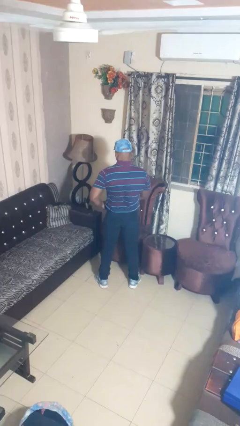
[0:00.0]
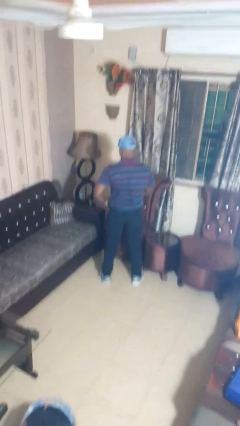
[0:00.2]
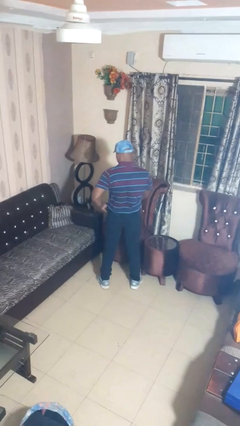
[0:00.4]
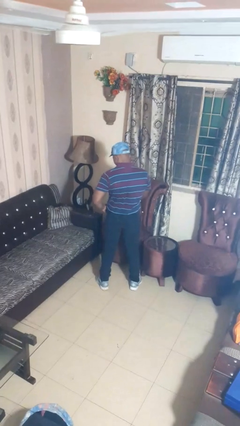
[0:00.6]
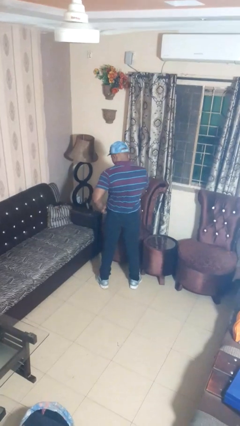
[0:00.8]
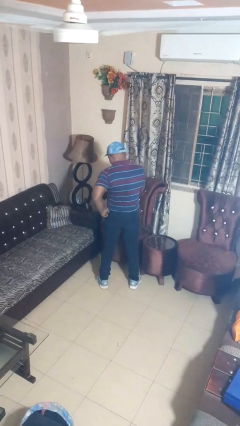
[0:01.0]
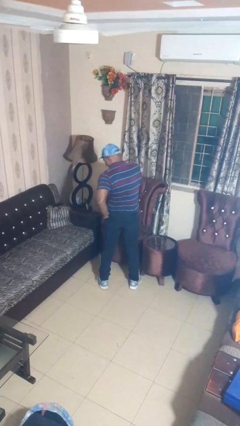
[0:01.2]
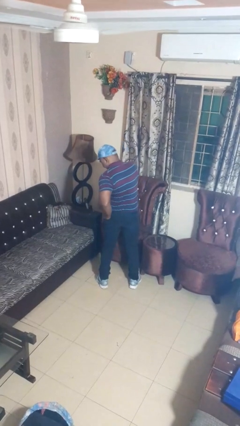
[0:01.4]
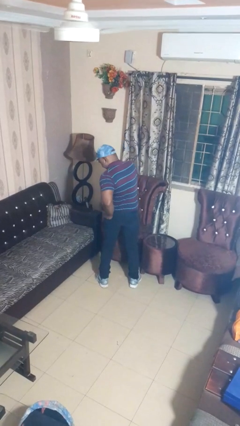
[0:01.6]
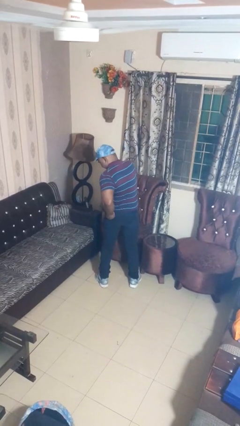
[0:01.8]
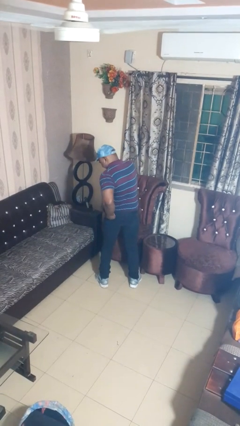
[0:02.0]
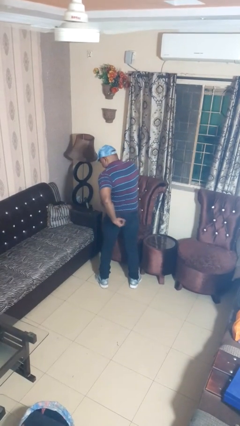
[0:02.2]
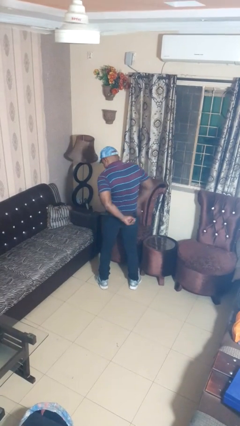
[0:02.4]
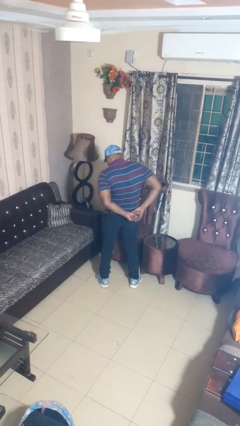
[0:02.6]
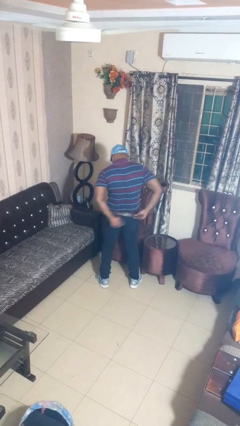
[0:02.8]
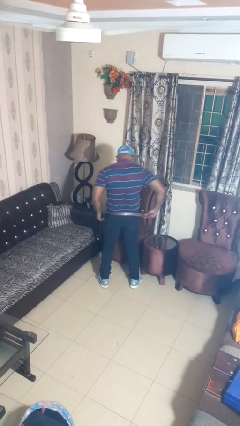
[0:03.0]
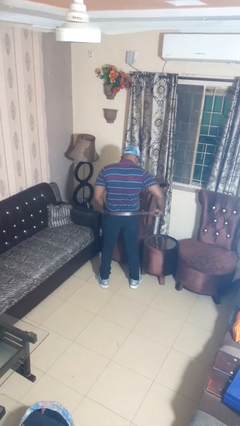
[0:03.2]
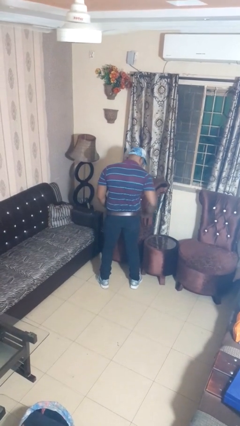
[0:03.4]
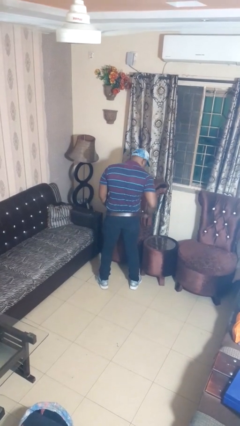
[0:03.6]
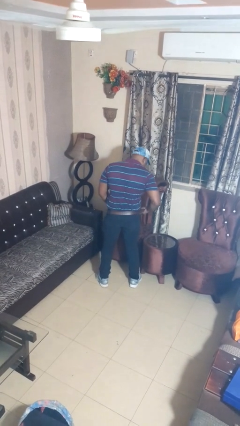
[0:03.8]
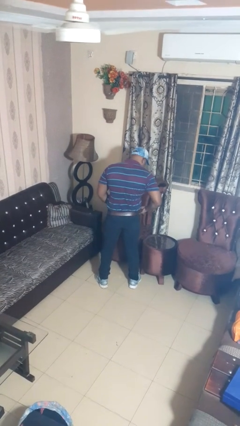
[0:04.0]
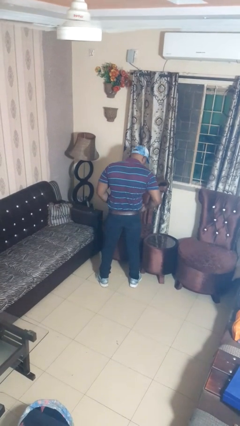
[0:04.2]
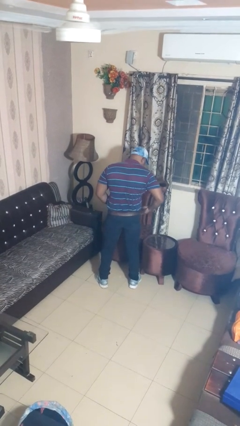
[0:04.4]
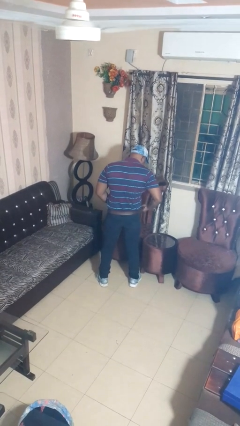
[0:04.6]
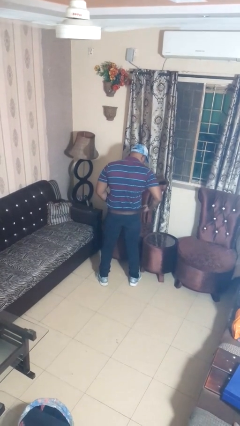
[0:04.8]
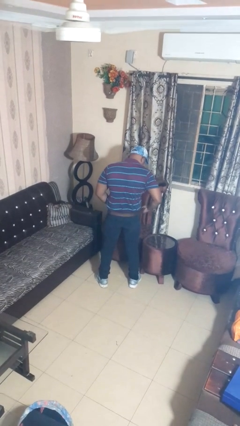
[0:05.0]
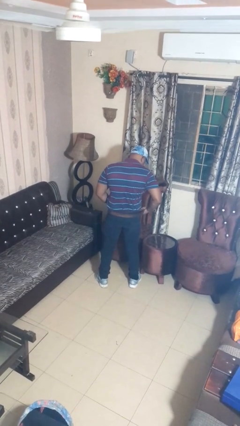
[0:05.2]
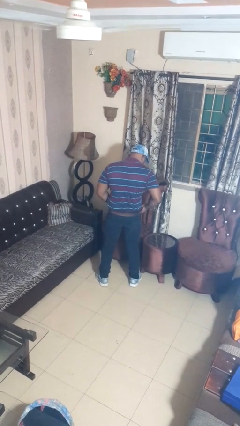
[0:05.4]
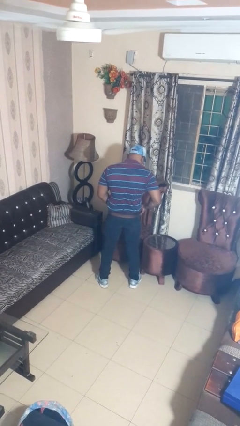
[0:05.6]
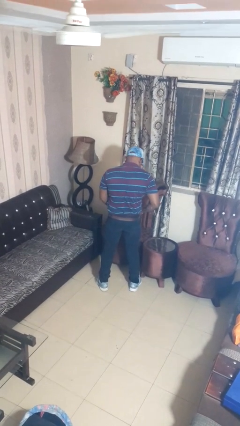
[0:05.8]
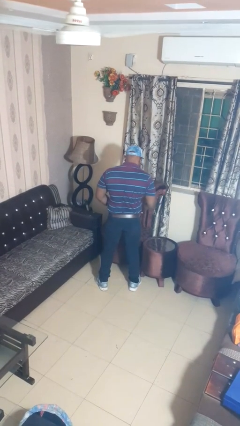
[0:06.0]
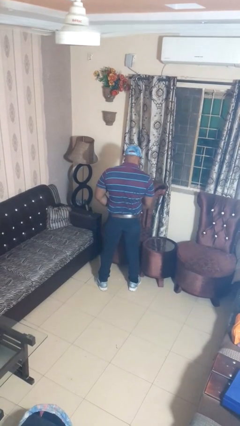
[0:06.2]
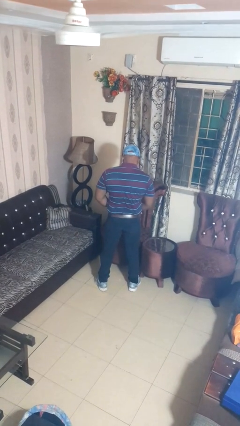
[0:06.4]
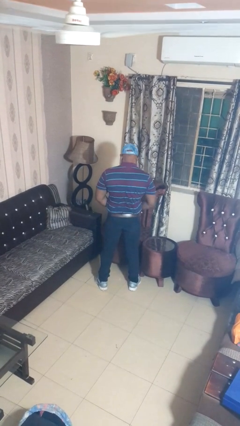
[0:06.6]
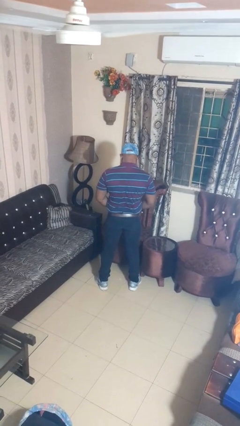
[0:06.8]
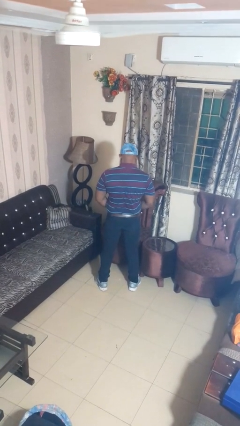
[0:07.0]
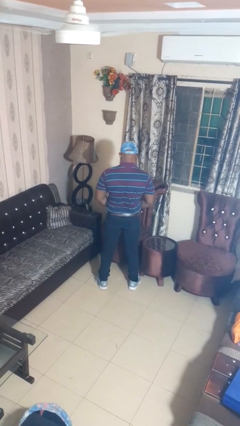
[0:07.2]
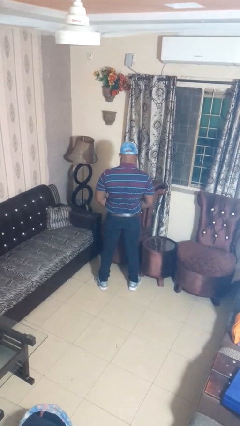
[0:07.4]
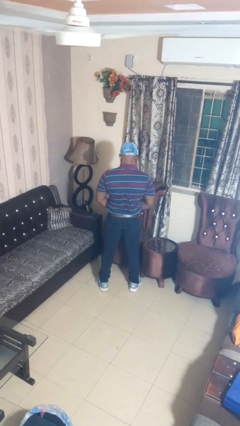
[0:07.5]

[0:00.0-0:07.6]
person puts on belt

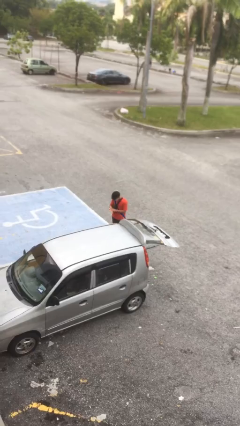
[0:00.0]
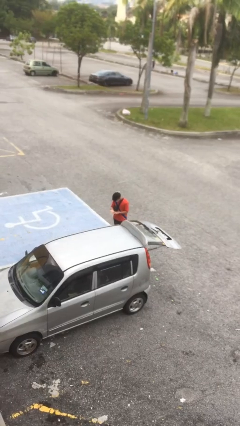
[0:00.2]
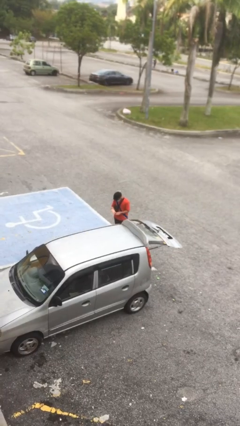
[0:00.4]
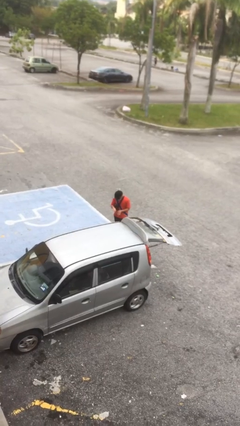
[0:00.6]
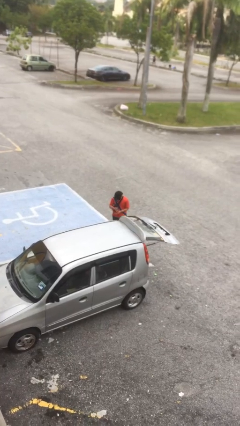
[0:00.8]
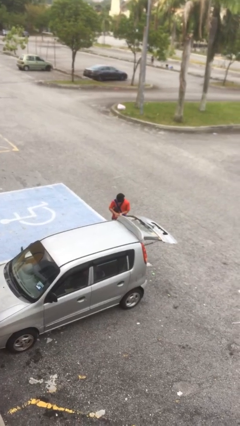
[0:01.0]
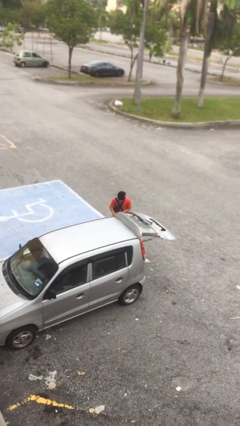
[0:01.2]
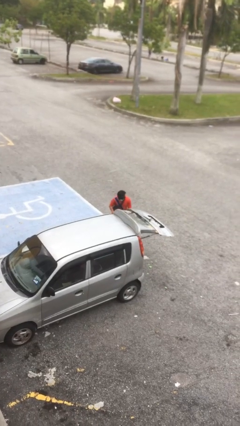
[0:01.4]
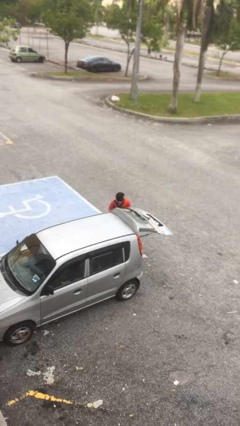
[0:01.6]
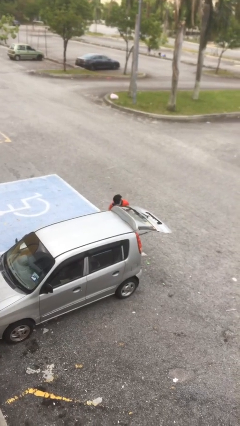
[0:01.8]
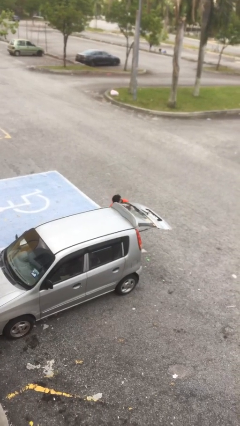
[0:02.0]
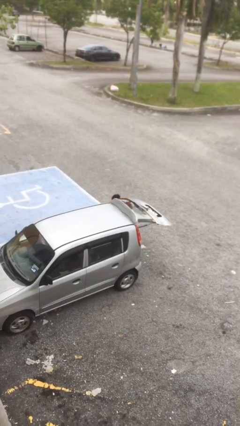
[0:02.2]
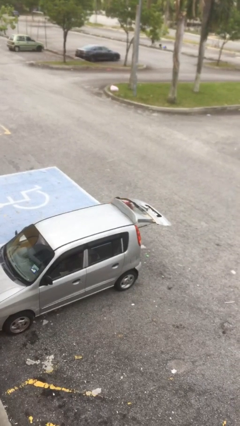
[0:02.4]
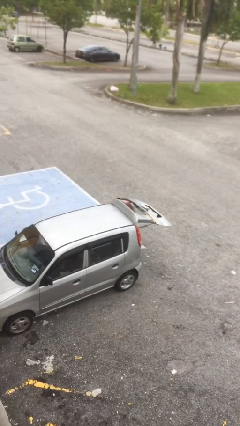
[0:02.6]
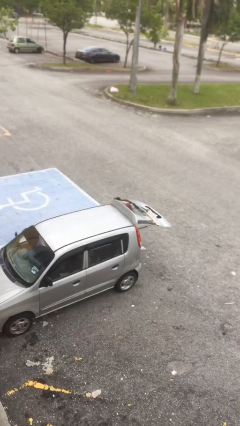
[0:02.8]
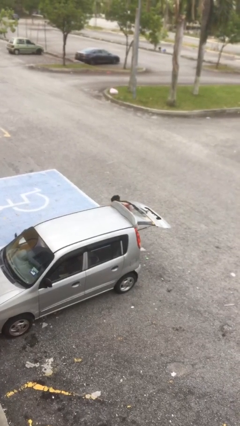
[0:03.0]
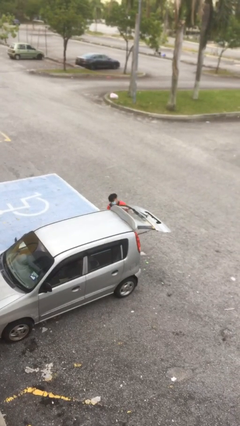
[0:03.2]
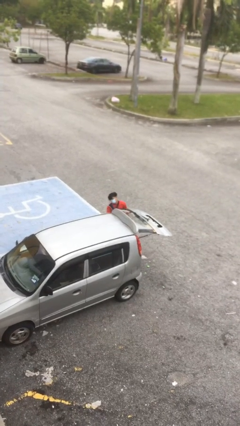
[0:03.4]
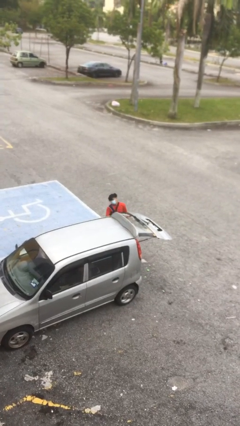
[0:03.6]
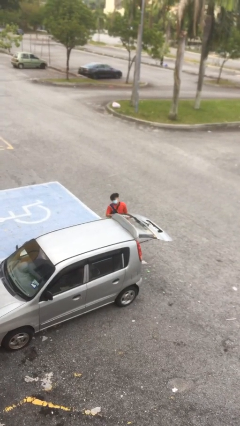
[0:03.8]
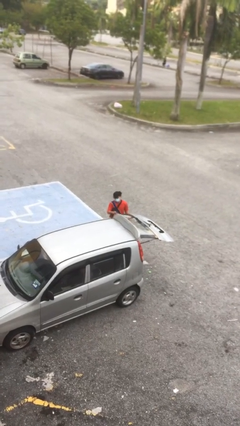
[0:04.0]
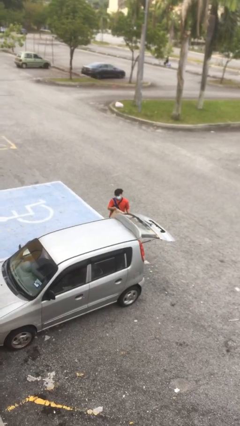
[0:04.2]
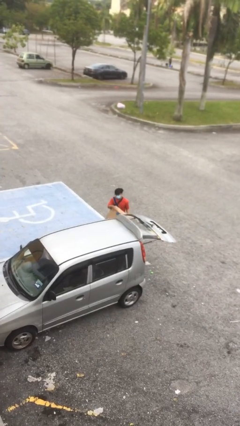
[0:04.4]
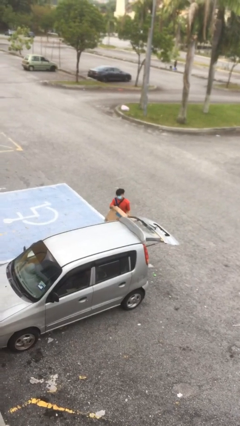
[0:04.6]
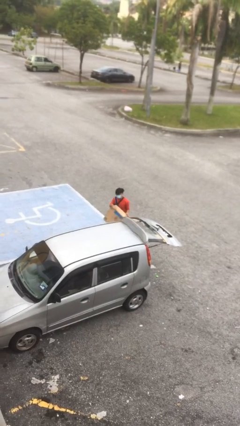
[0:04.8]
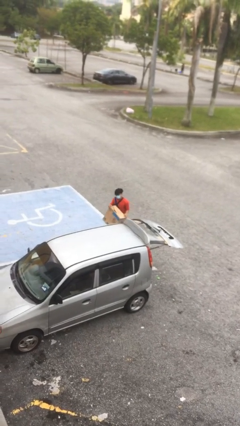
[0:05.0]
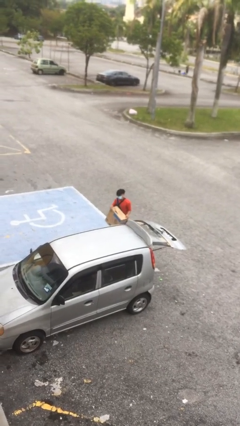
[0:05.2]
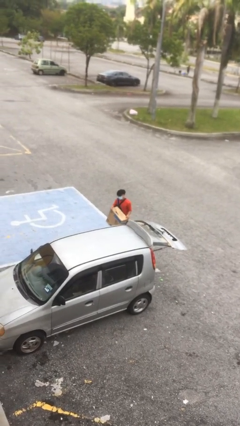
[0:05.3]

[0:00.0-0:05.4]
person unloads car

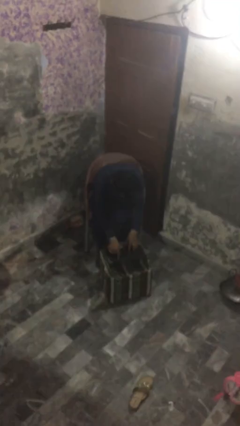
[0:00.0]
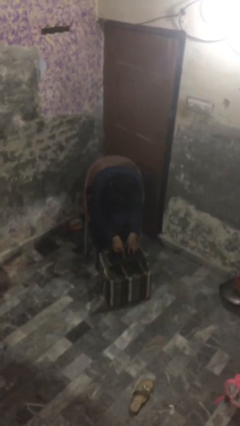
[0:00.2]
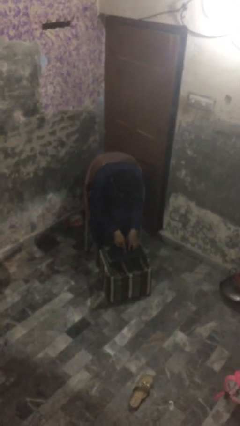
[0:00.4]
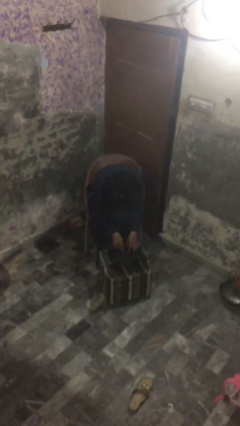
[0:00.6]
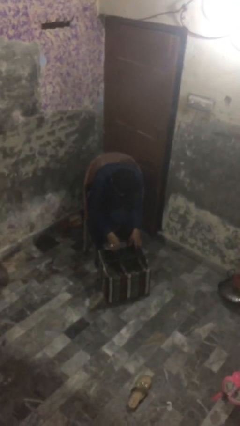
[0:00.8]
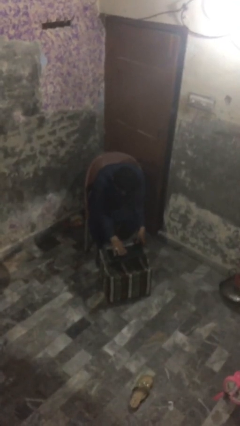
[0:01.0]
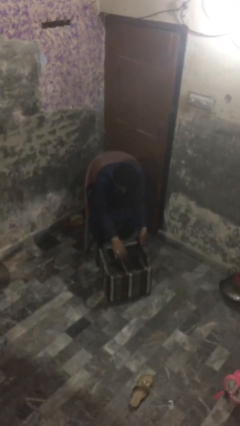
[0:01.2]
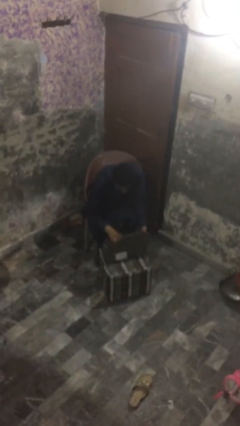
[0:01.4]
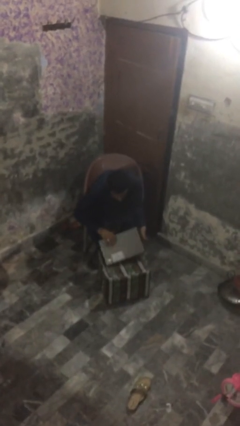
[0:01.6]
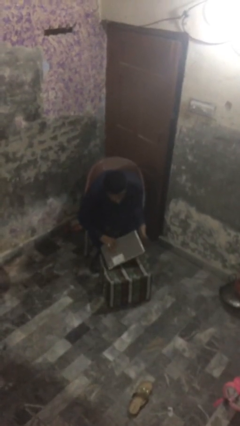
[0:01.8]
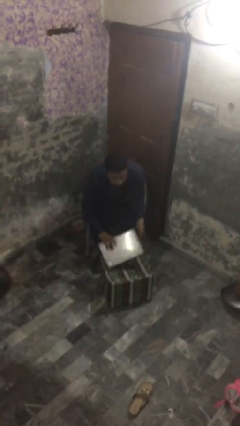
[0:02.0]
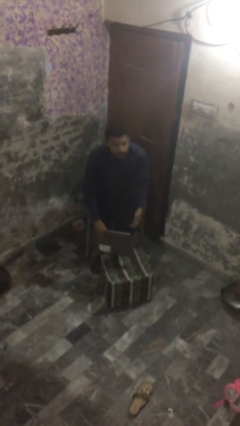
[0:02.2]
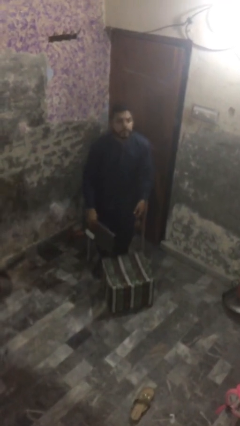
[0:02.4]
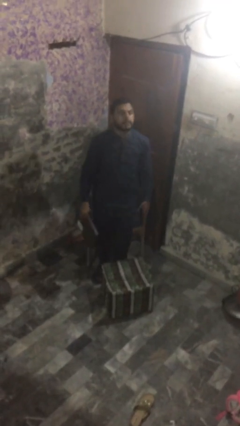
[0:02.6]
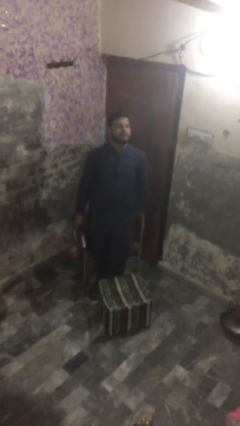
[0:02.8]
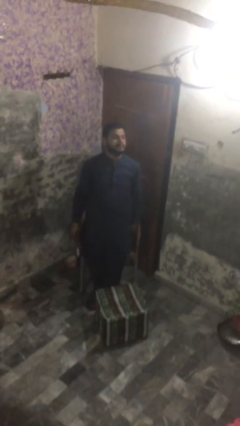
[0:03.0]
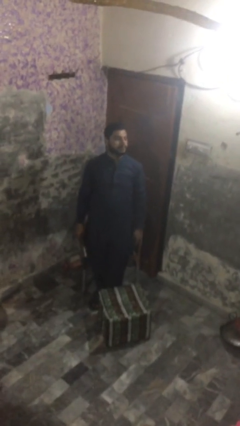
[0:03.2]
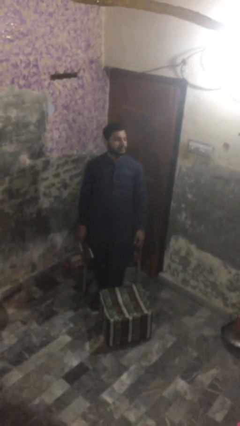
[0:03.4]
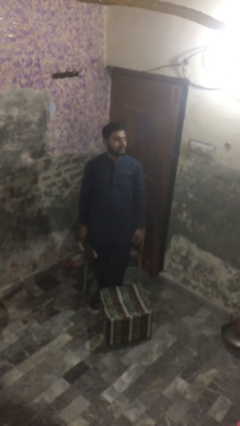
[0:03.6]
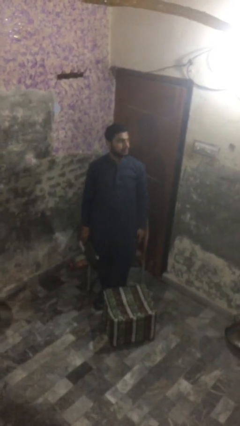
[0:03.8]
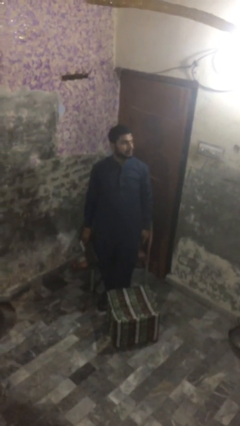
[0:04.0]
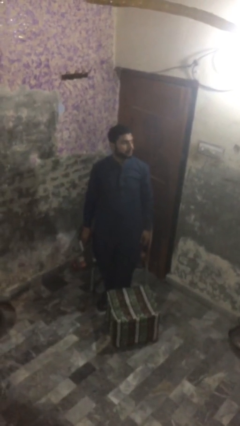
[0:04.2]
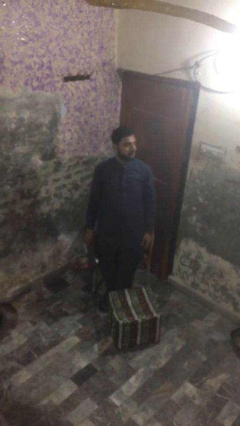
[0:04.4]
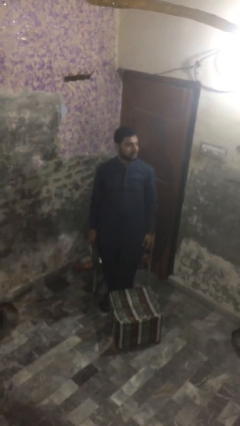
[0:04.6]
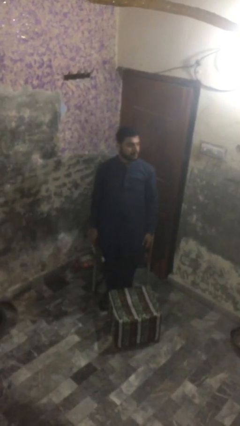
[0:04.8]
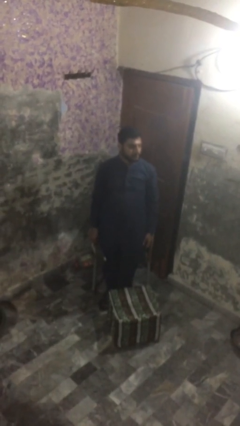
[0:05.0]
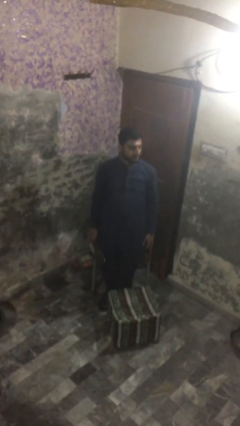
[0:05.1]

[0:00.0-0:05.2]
person stands up
